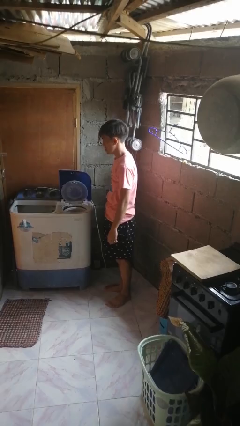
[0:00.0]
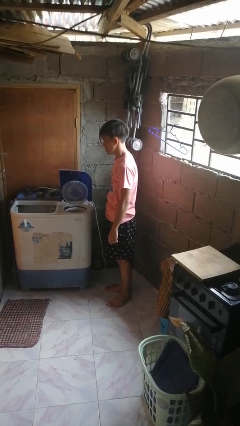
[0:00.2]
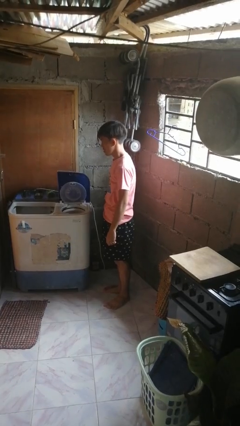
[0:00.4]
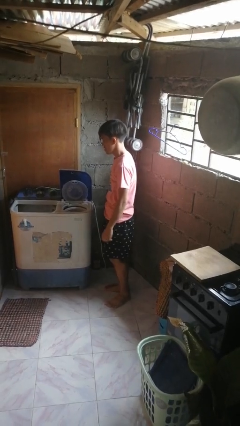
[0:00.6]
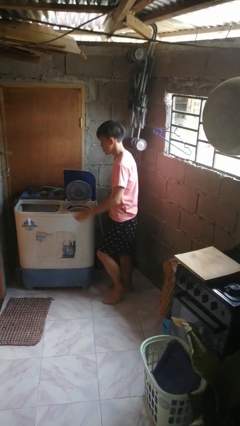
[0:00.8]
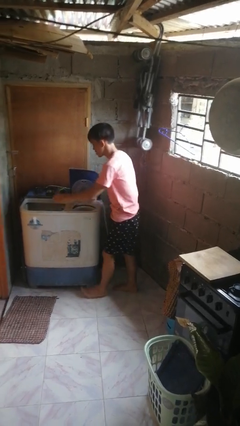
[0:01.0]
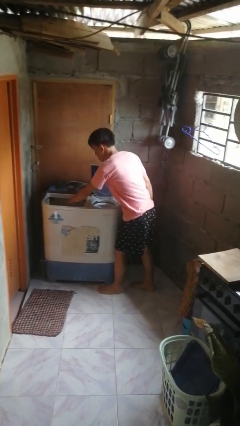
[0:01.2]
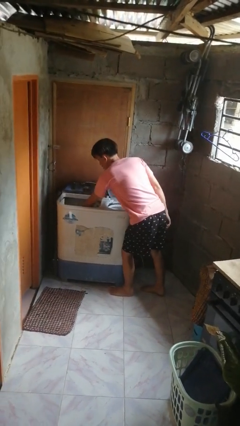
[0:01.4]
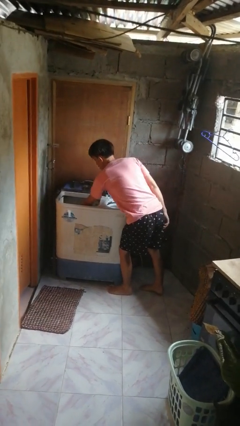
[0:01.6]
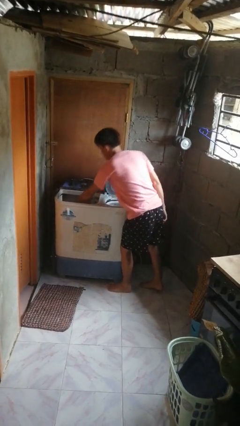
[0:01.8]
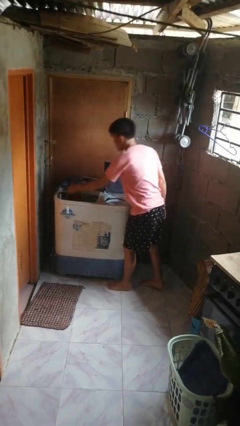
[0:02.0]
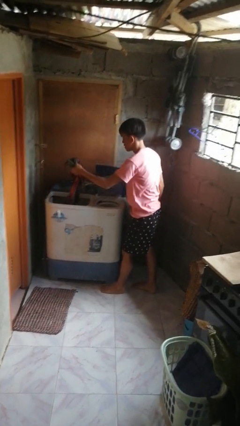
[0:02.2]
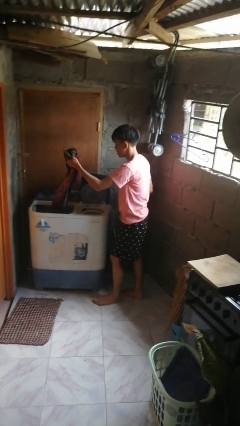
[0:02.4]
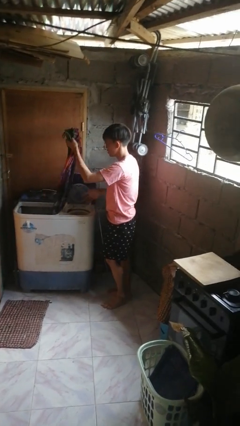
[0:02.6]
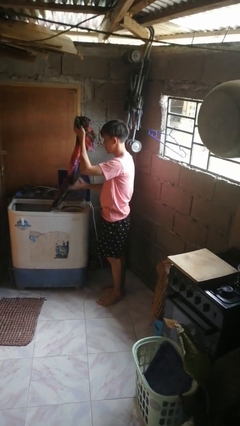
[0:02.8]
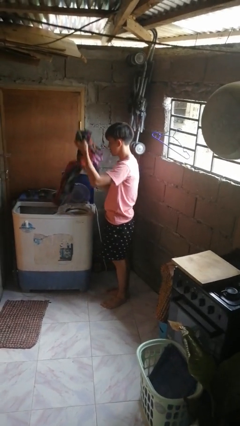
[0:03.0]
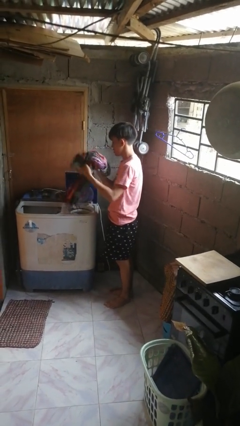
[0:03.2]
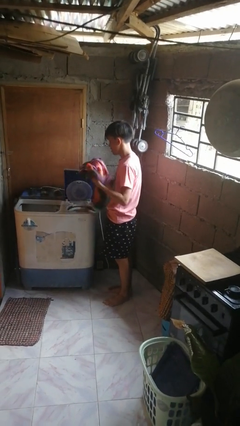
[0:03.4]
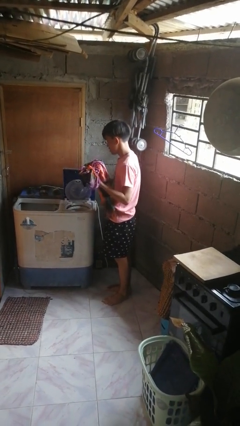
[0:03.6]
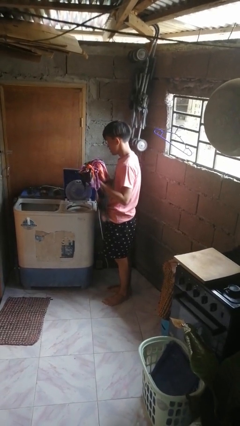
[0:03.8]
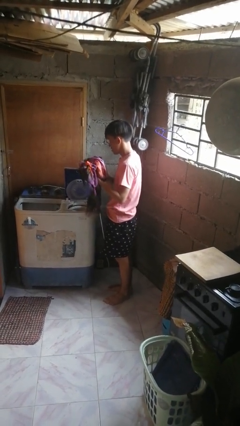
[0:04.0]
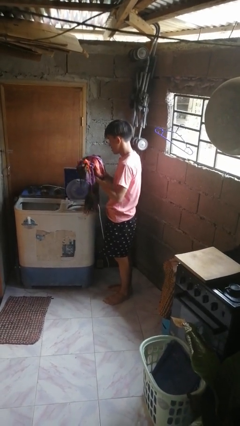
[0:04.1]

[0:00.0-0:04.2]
person unloads clotheswasher

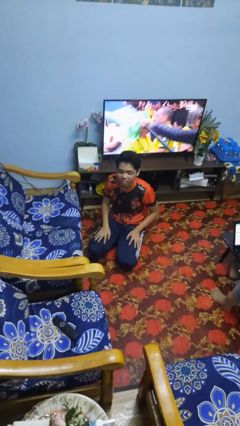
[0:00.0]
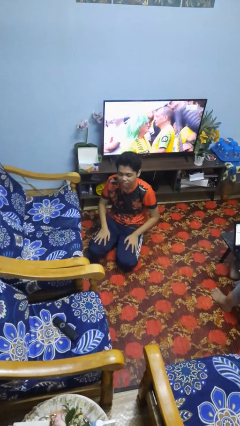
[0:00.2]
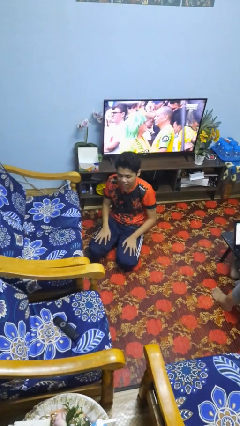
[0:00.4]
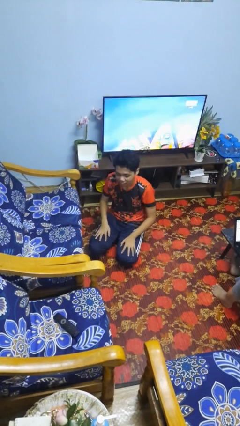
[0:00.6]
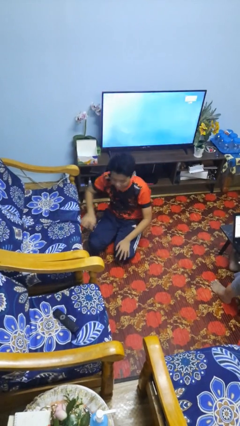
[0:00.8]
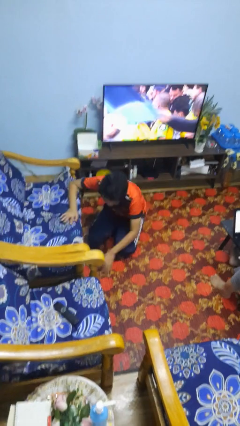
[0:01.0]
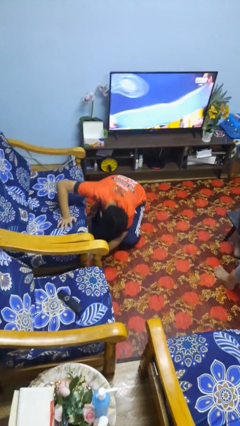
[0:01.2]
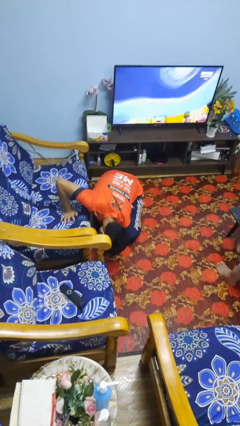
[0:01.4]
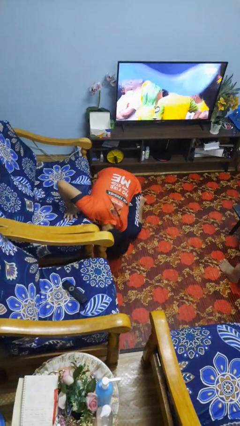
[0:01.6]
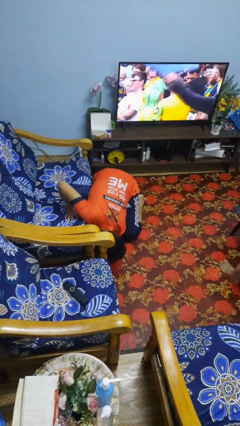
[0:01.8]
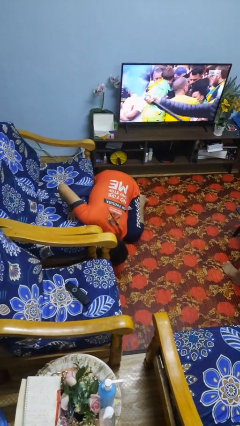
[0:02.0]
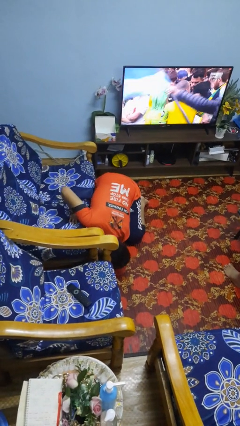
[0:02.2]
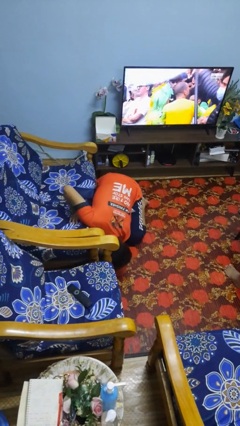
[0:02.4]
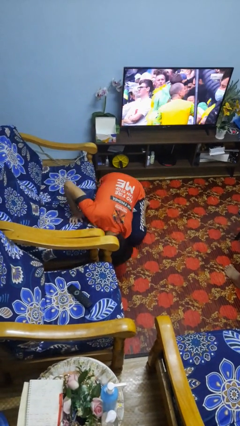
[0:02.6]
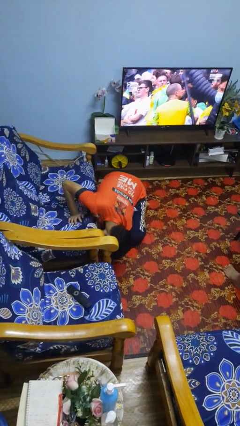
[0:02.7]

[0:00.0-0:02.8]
person searches under couch

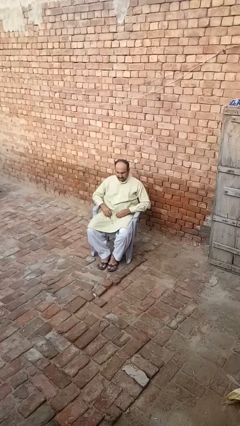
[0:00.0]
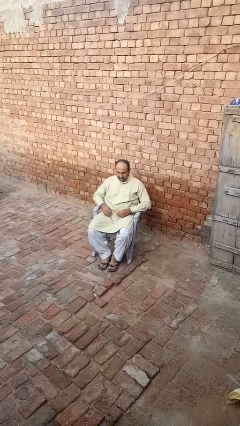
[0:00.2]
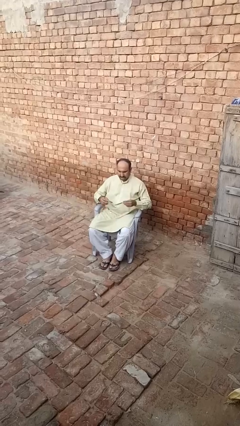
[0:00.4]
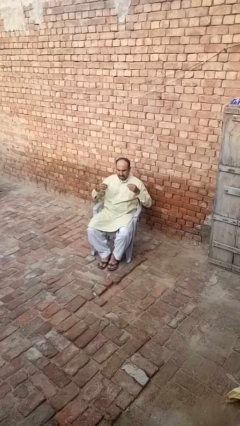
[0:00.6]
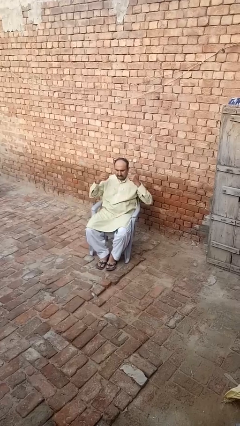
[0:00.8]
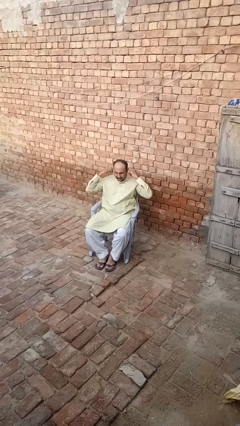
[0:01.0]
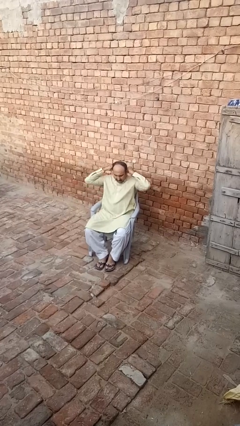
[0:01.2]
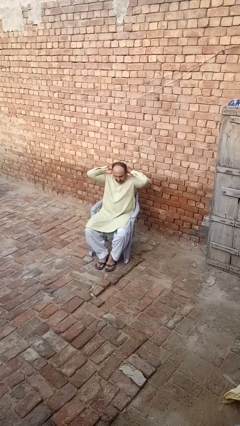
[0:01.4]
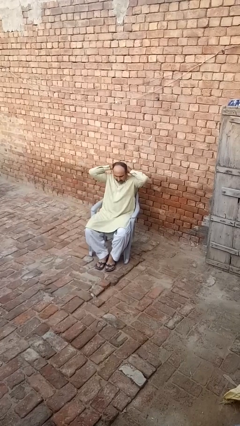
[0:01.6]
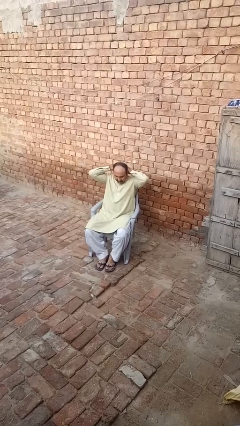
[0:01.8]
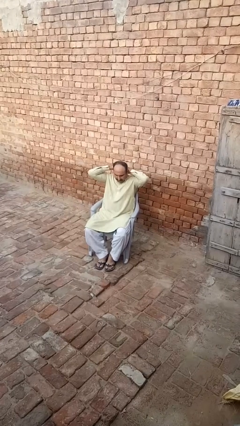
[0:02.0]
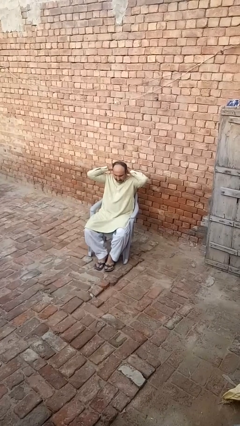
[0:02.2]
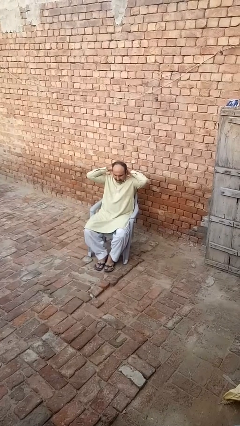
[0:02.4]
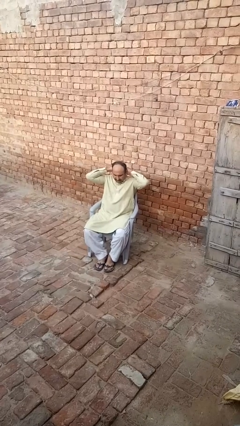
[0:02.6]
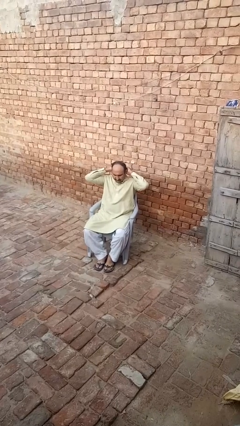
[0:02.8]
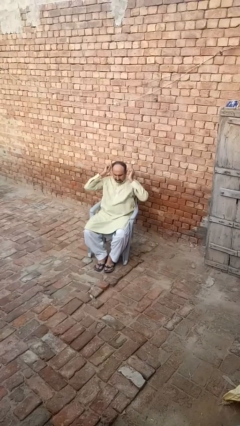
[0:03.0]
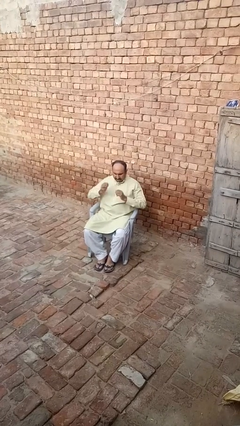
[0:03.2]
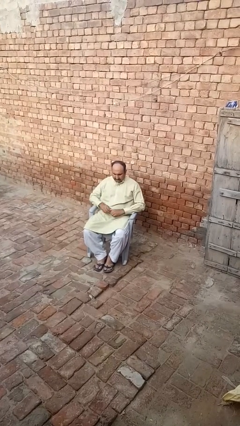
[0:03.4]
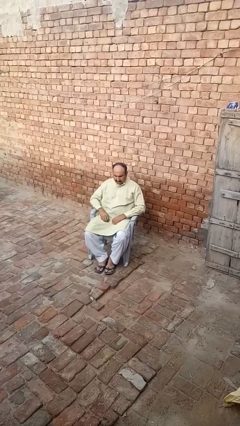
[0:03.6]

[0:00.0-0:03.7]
person puts on necklace

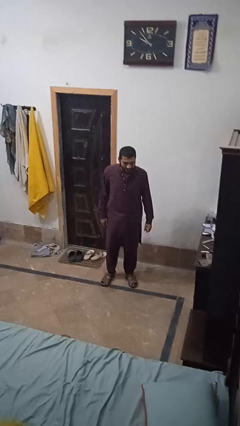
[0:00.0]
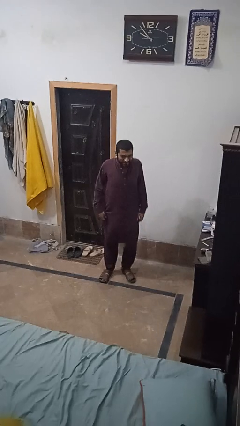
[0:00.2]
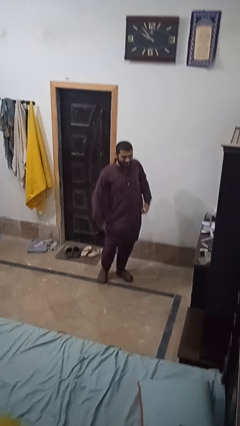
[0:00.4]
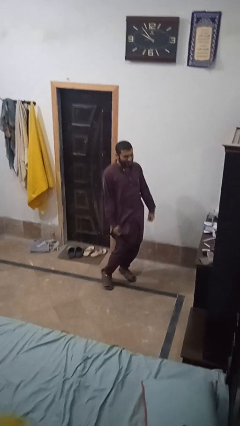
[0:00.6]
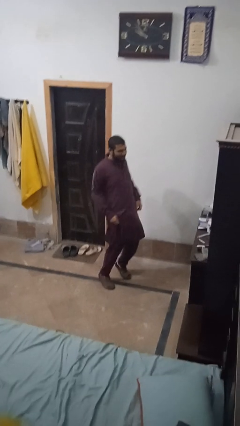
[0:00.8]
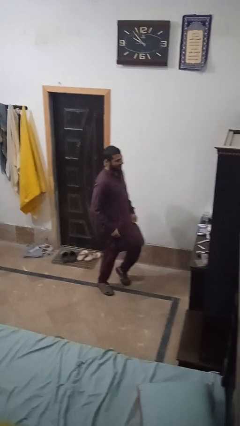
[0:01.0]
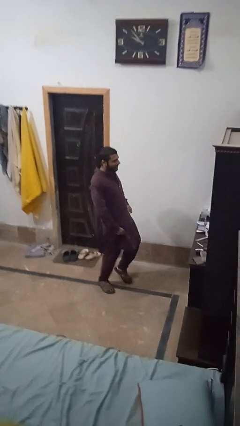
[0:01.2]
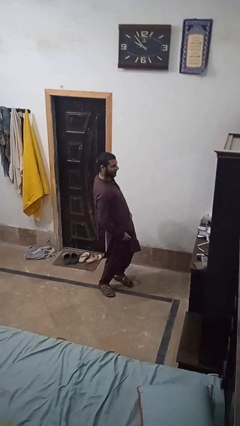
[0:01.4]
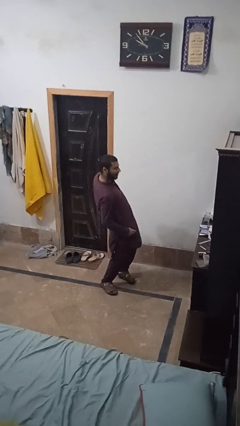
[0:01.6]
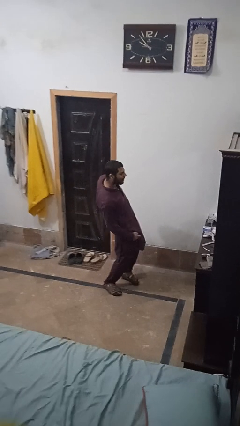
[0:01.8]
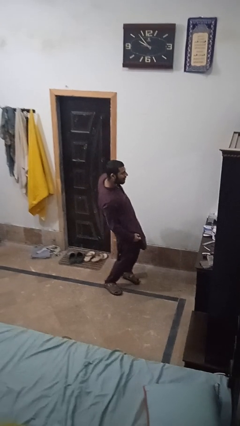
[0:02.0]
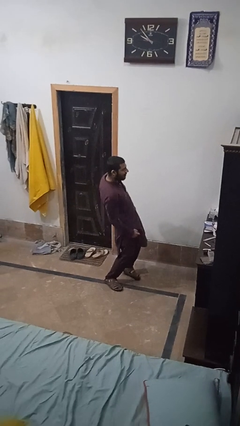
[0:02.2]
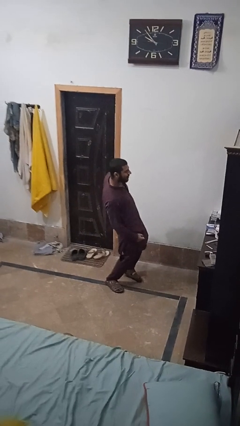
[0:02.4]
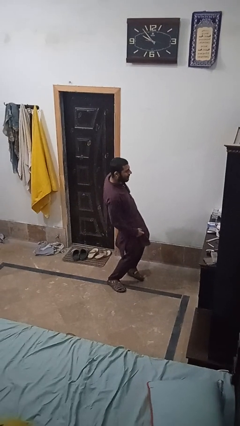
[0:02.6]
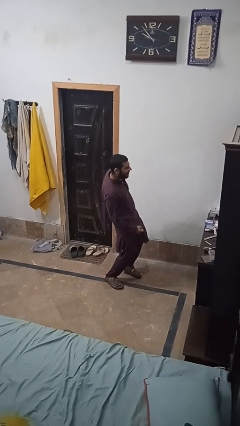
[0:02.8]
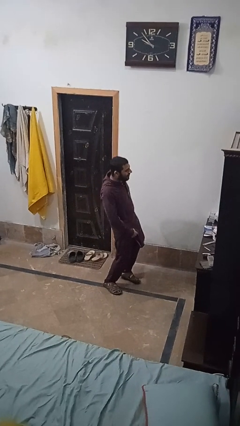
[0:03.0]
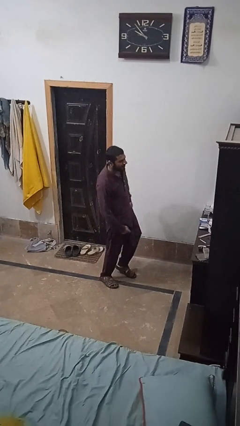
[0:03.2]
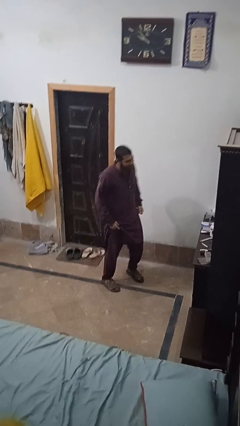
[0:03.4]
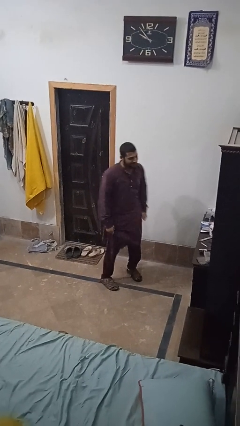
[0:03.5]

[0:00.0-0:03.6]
person dances in place

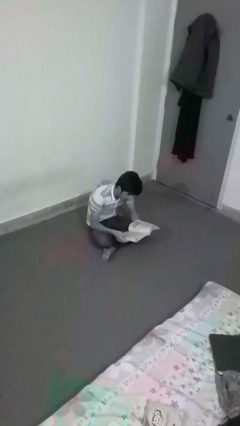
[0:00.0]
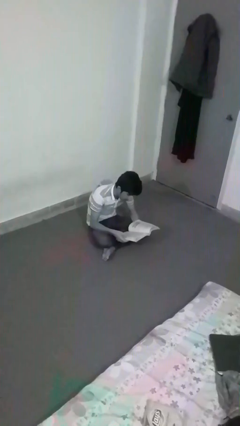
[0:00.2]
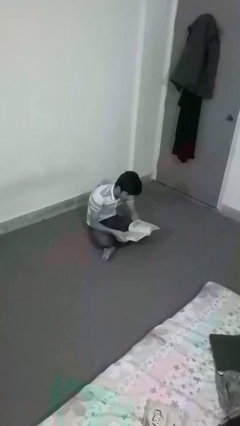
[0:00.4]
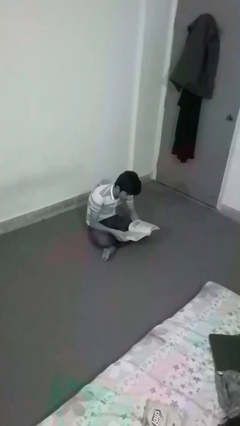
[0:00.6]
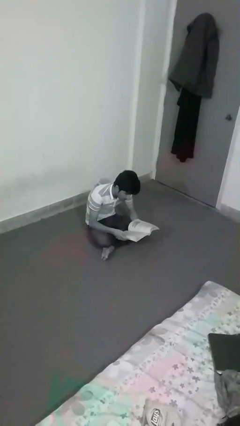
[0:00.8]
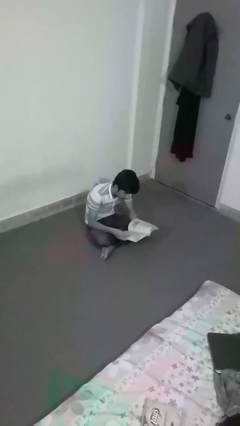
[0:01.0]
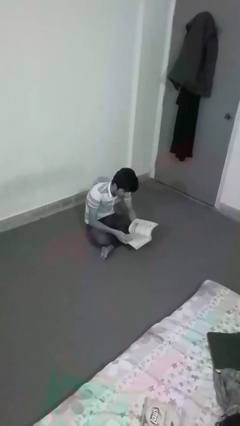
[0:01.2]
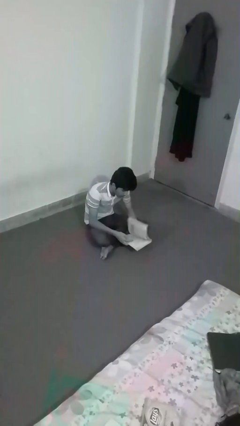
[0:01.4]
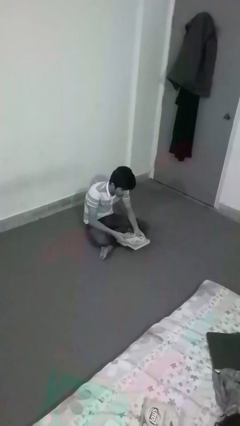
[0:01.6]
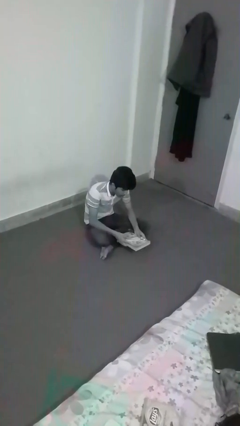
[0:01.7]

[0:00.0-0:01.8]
person reads document

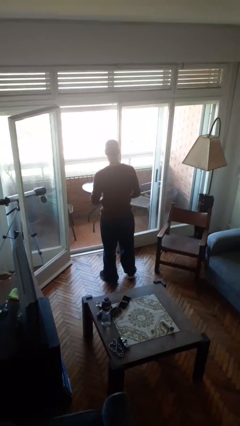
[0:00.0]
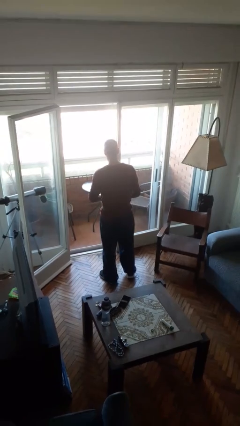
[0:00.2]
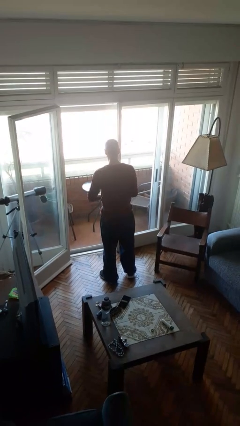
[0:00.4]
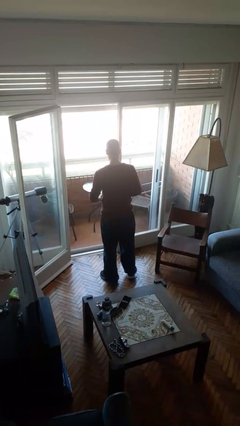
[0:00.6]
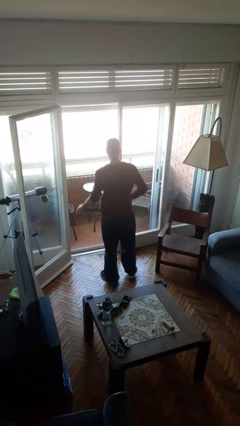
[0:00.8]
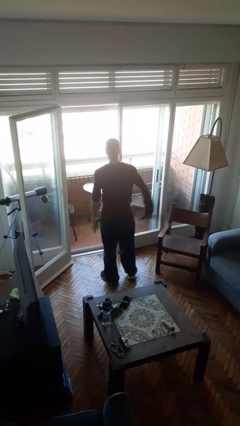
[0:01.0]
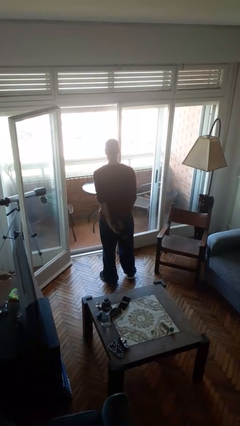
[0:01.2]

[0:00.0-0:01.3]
person takes off belt

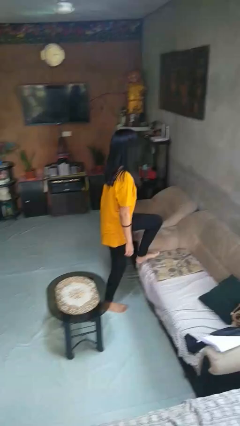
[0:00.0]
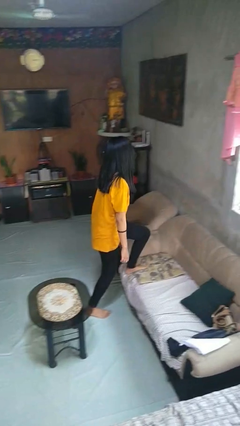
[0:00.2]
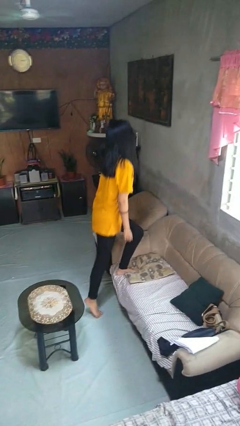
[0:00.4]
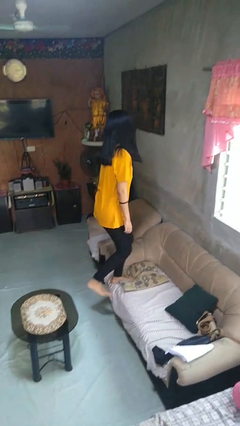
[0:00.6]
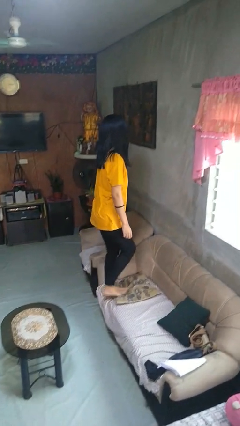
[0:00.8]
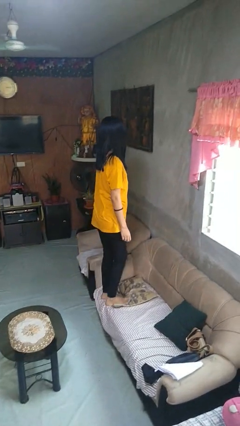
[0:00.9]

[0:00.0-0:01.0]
person climbs on couch
